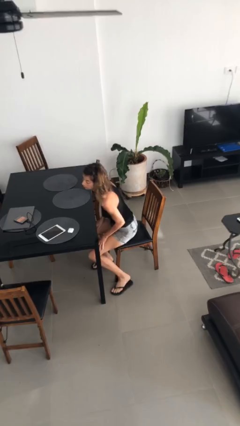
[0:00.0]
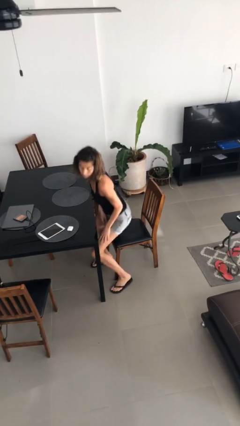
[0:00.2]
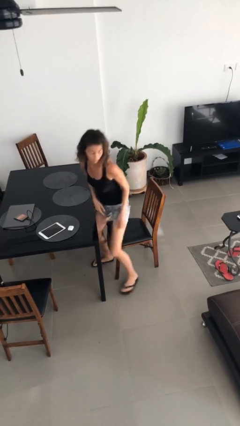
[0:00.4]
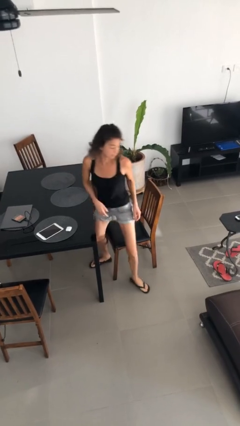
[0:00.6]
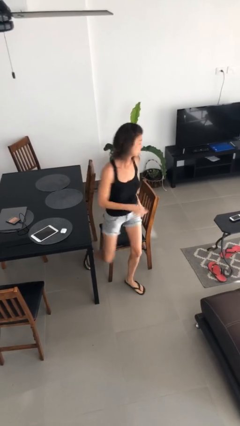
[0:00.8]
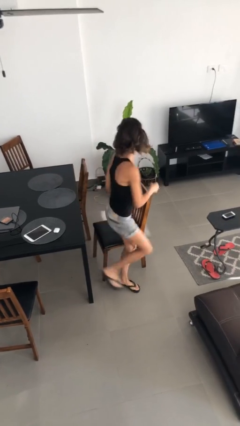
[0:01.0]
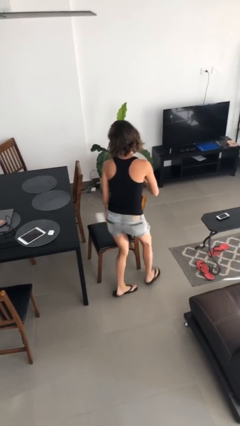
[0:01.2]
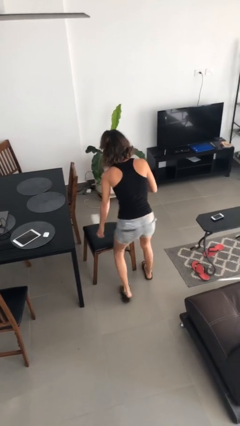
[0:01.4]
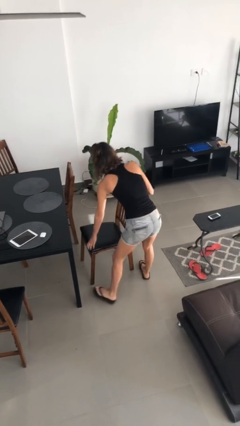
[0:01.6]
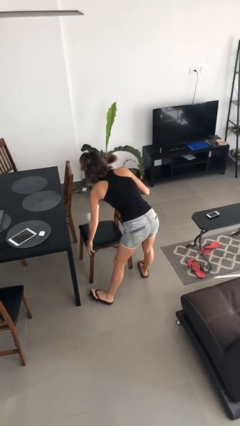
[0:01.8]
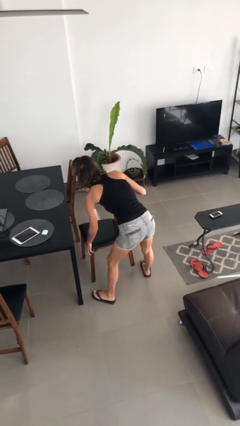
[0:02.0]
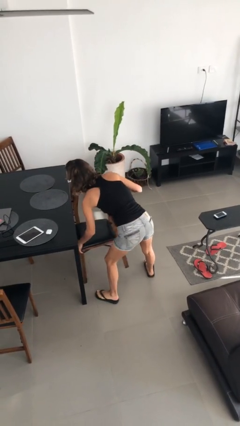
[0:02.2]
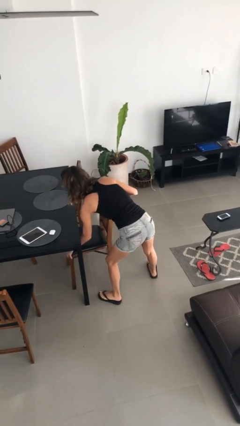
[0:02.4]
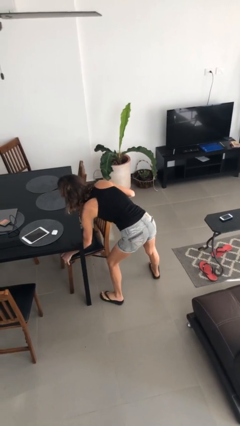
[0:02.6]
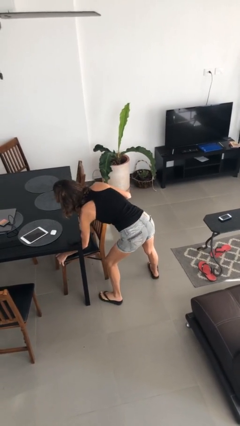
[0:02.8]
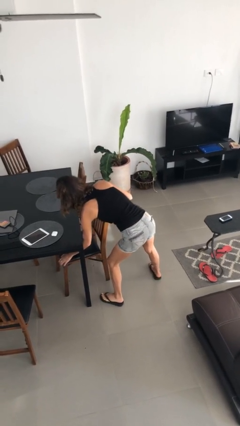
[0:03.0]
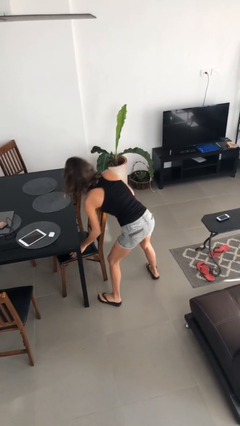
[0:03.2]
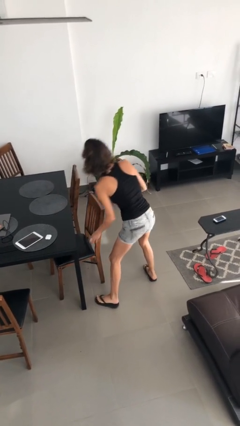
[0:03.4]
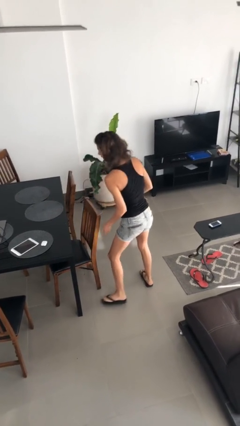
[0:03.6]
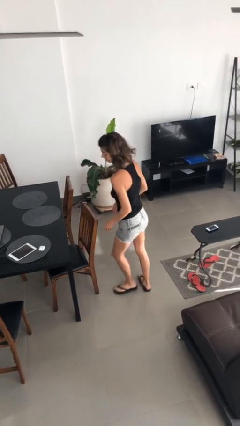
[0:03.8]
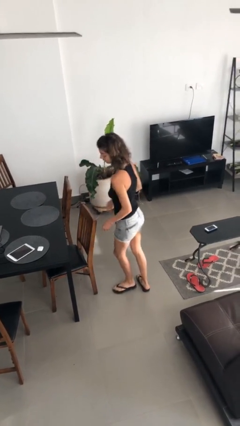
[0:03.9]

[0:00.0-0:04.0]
person stands up

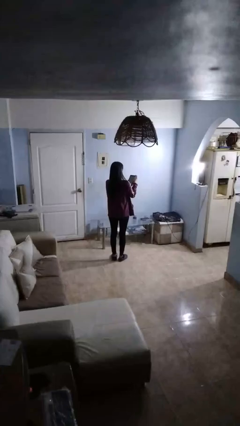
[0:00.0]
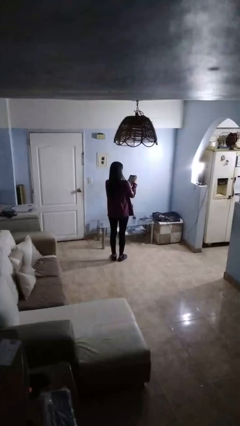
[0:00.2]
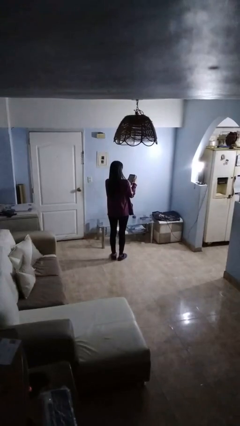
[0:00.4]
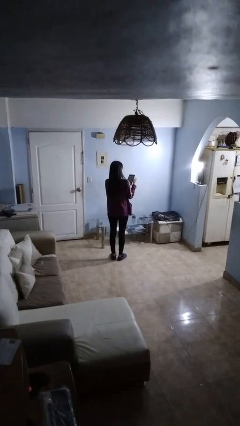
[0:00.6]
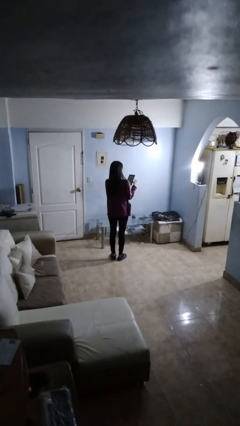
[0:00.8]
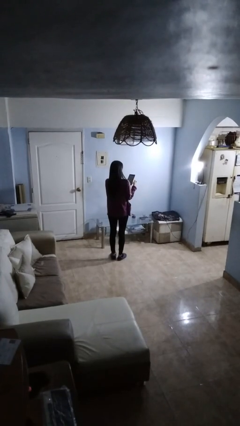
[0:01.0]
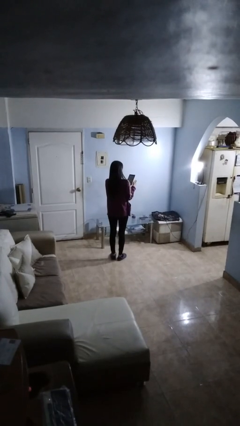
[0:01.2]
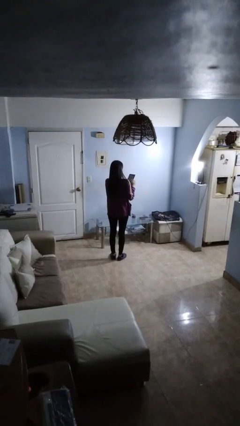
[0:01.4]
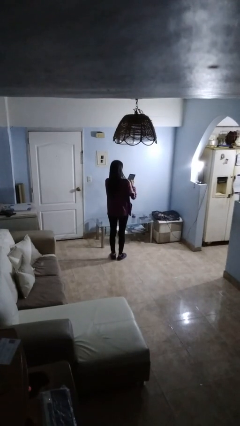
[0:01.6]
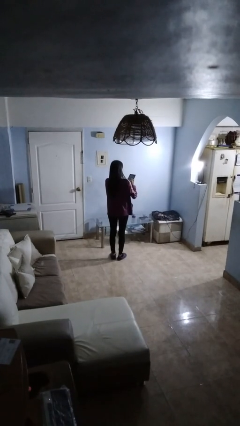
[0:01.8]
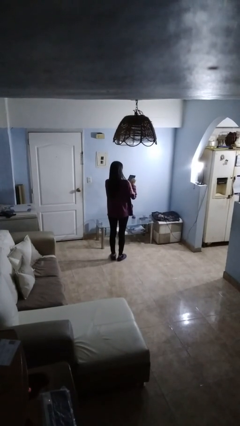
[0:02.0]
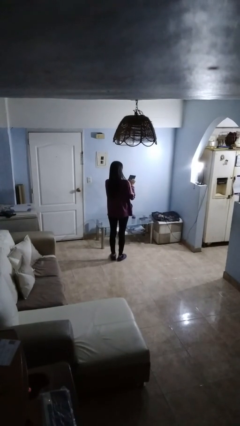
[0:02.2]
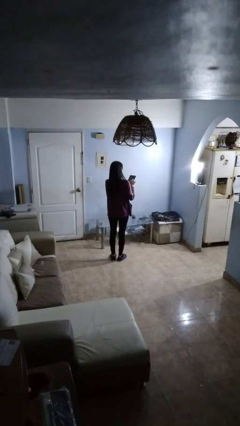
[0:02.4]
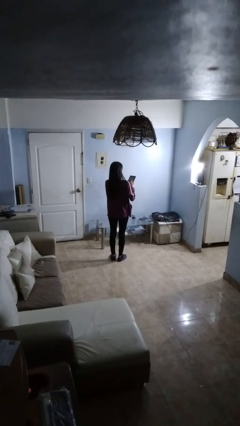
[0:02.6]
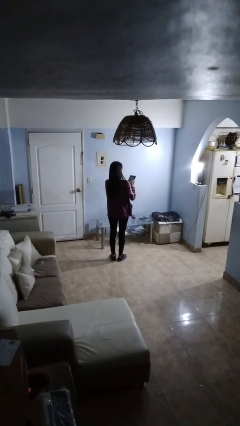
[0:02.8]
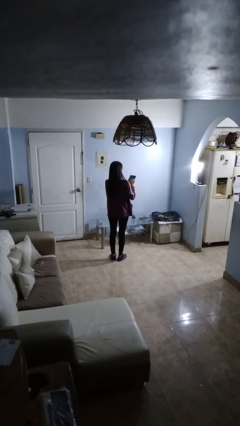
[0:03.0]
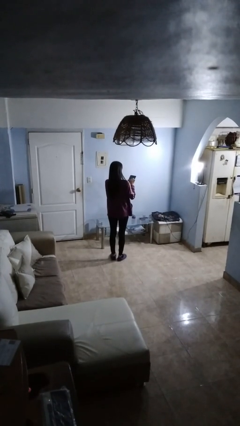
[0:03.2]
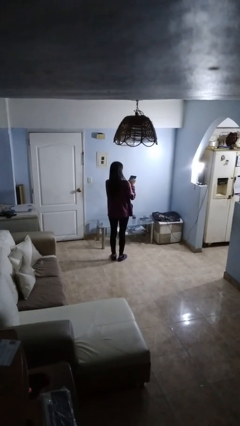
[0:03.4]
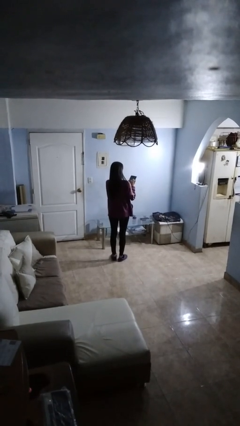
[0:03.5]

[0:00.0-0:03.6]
person interacts with tablet

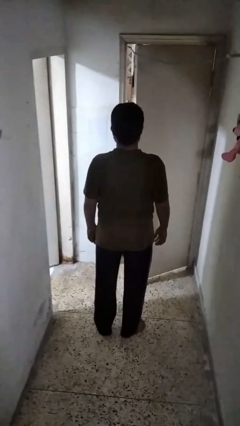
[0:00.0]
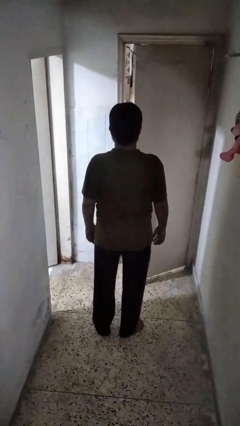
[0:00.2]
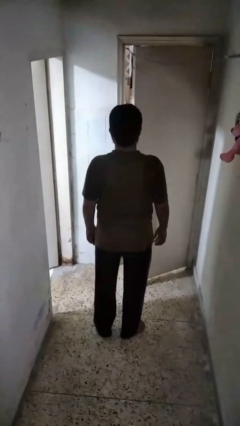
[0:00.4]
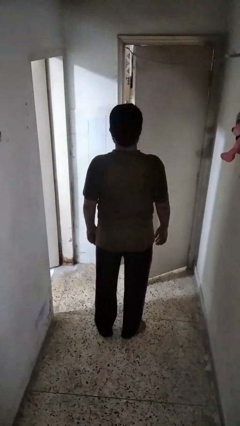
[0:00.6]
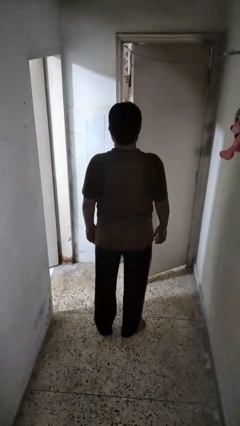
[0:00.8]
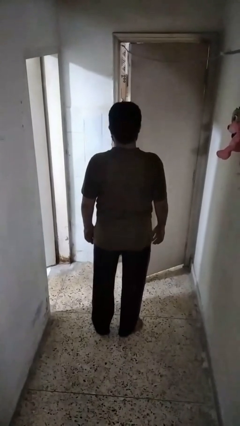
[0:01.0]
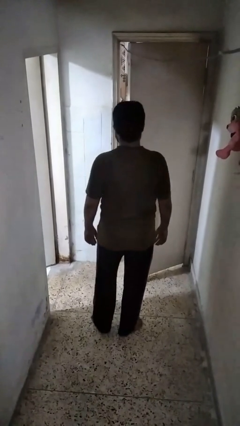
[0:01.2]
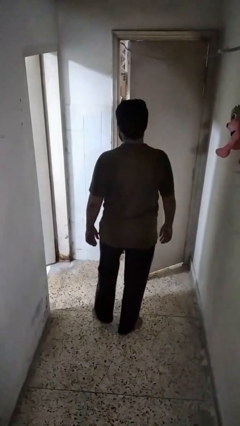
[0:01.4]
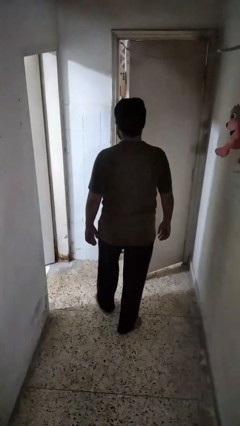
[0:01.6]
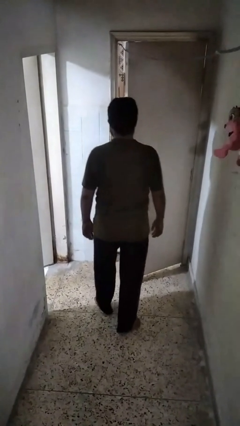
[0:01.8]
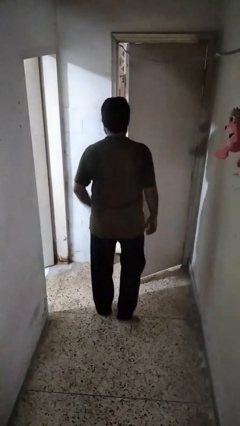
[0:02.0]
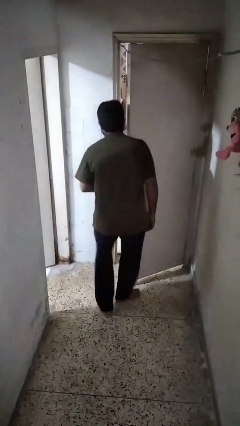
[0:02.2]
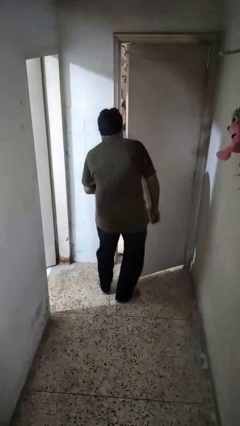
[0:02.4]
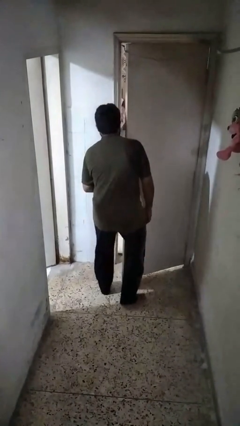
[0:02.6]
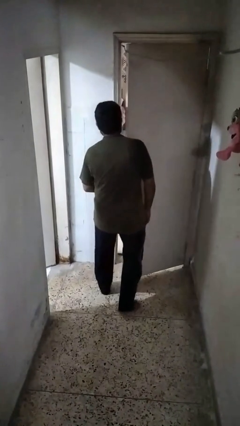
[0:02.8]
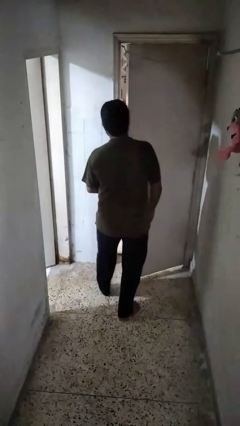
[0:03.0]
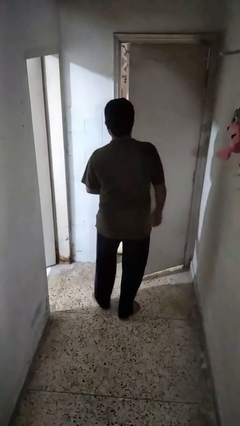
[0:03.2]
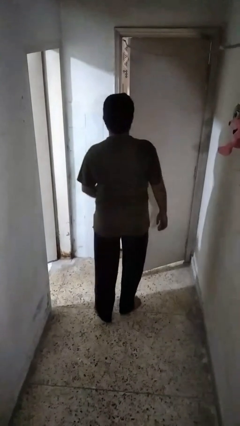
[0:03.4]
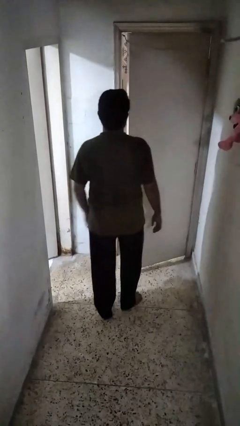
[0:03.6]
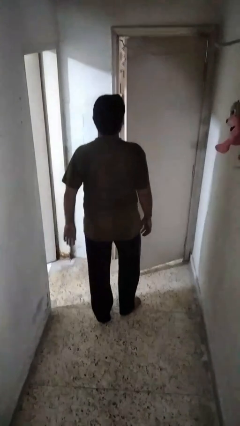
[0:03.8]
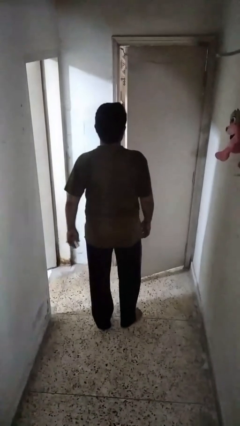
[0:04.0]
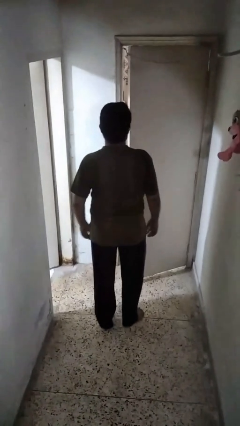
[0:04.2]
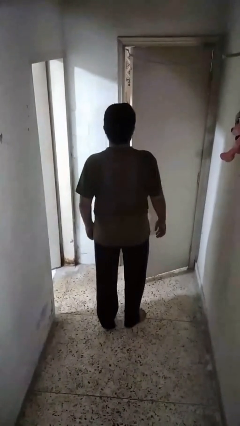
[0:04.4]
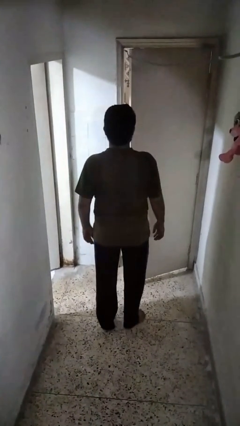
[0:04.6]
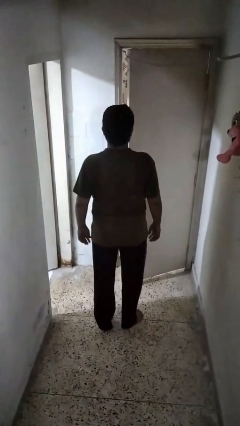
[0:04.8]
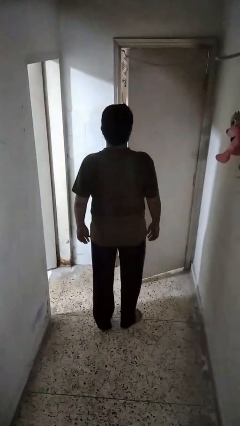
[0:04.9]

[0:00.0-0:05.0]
person bumps into wall

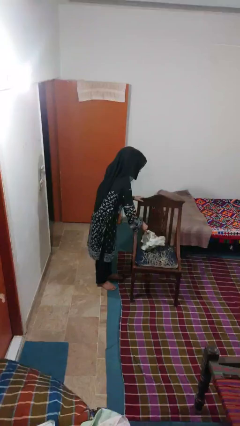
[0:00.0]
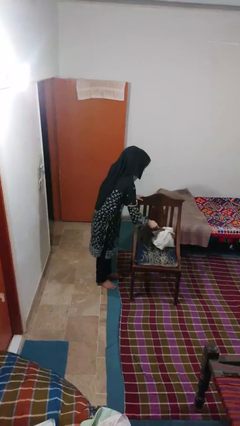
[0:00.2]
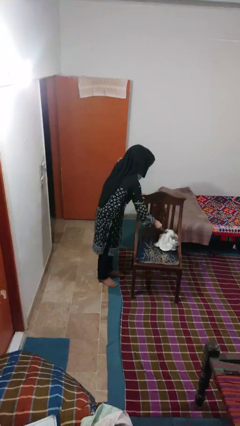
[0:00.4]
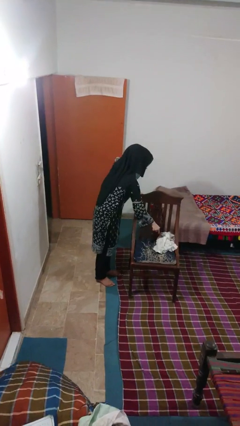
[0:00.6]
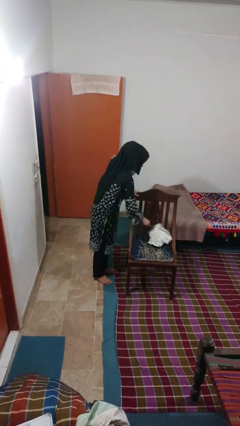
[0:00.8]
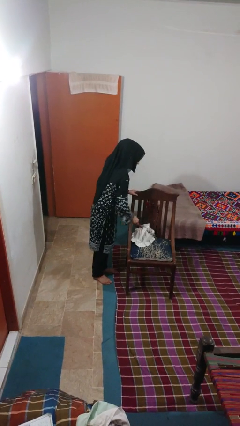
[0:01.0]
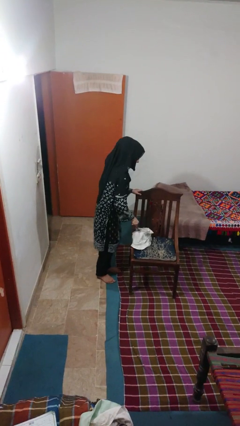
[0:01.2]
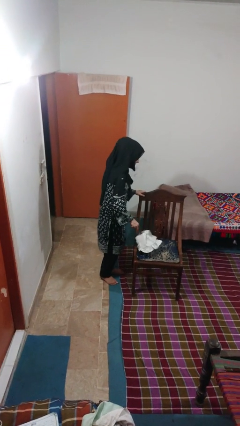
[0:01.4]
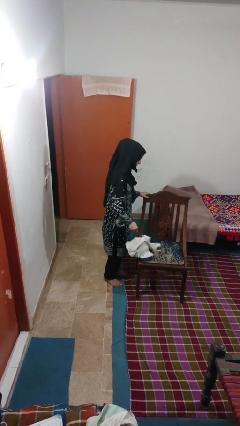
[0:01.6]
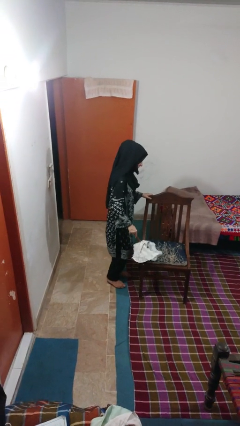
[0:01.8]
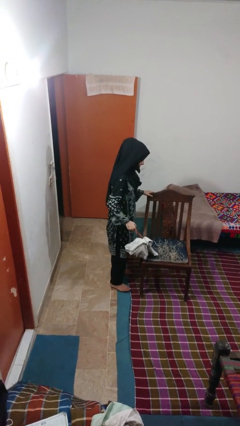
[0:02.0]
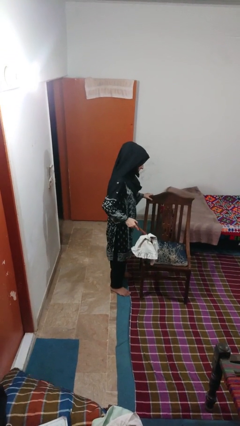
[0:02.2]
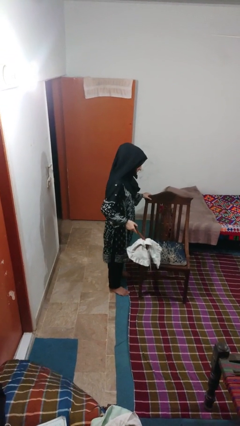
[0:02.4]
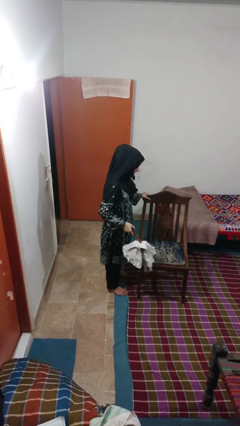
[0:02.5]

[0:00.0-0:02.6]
person dusts furniture

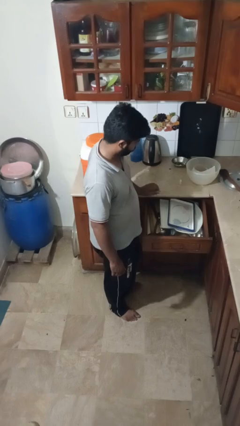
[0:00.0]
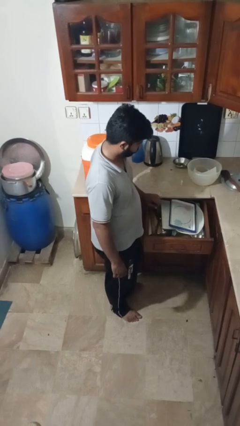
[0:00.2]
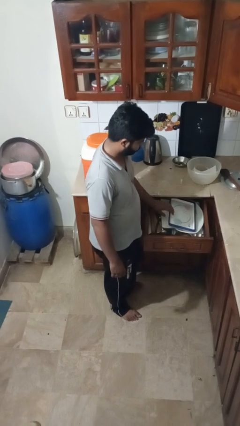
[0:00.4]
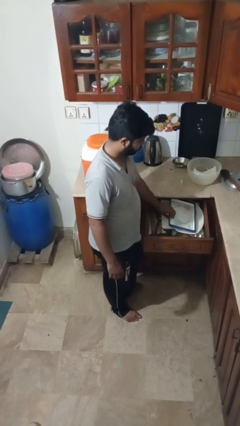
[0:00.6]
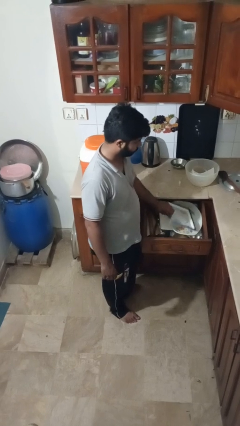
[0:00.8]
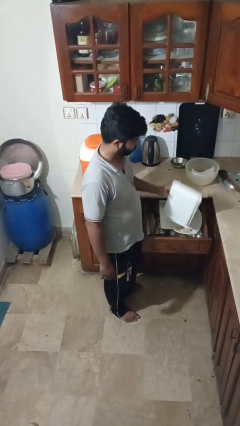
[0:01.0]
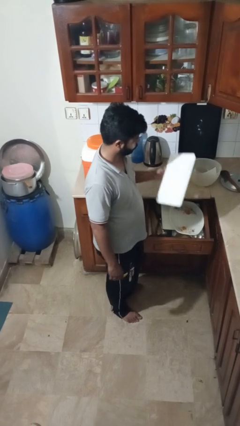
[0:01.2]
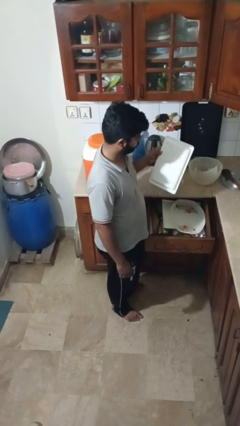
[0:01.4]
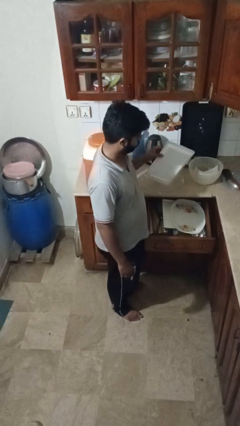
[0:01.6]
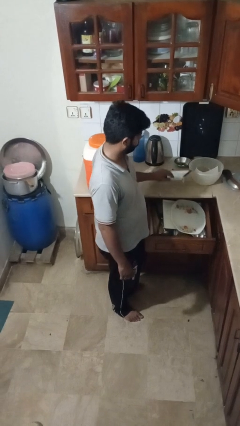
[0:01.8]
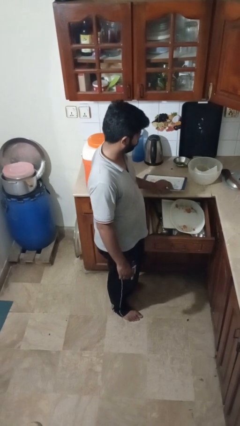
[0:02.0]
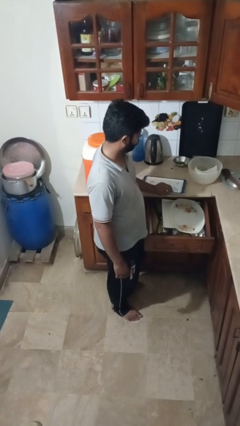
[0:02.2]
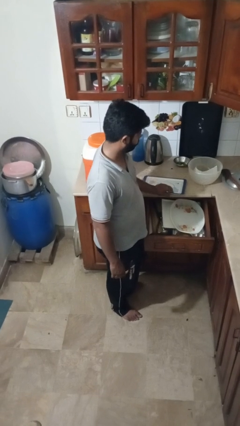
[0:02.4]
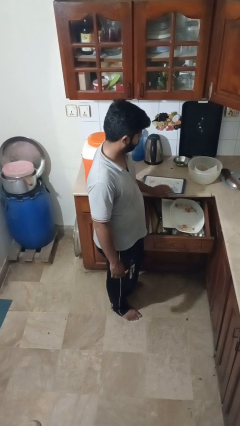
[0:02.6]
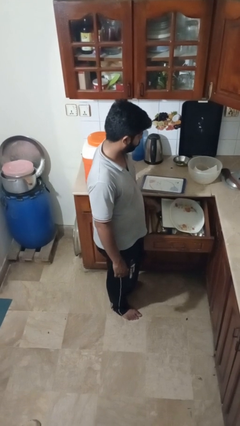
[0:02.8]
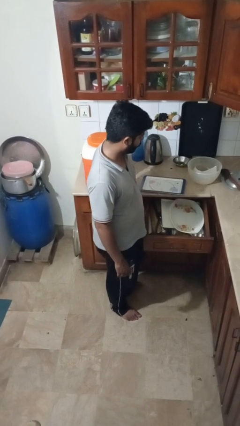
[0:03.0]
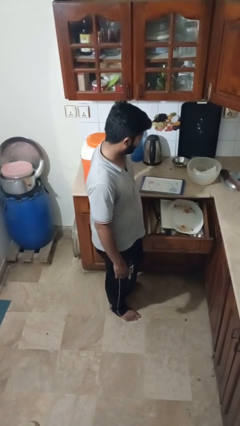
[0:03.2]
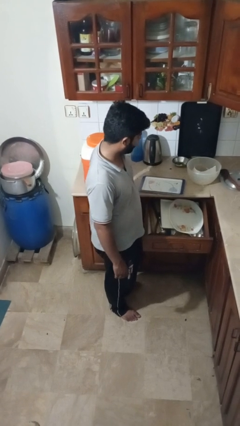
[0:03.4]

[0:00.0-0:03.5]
person takes object from kitchen drawer
